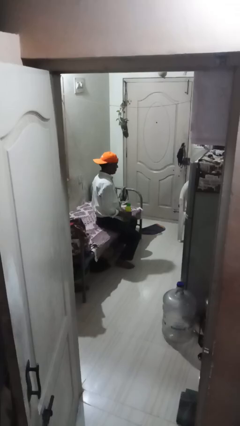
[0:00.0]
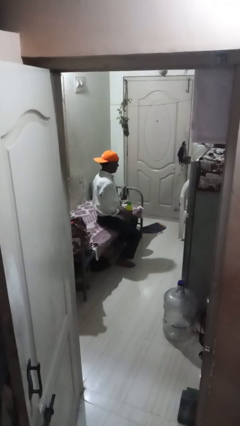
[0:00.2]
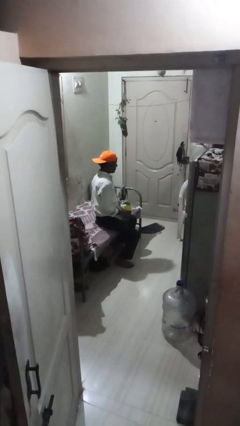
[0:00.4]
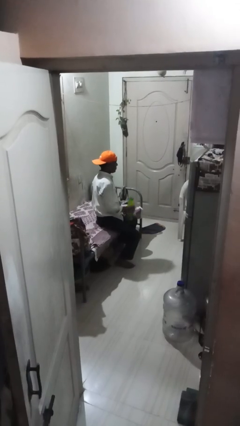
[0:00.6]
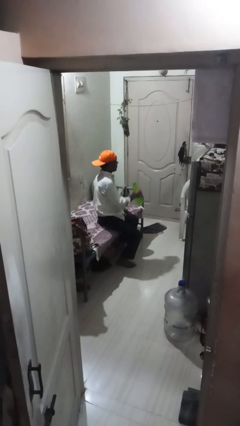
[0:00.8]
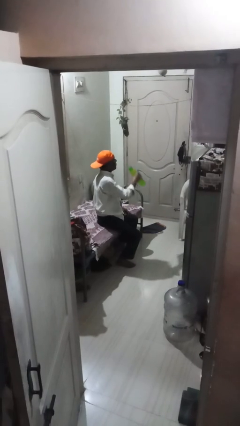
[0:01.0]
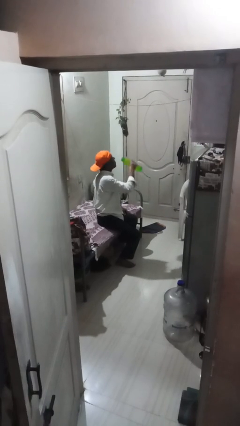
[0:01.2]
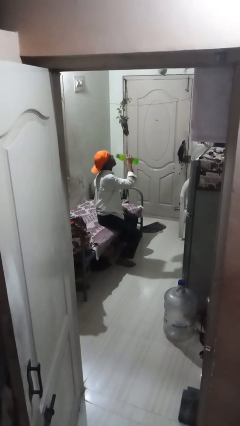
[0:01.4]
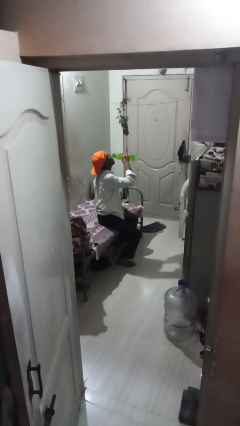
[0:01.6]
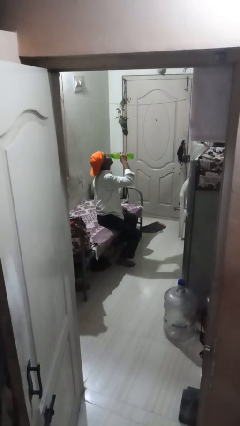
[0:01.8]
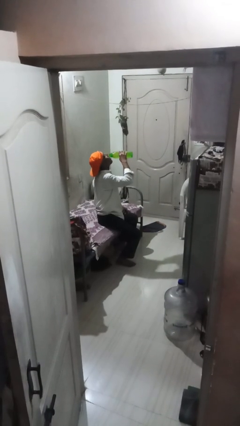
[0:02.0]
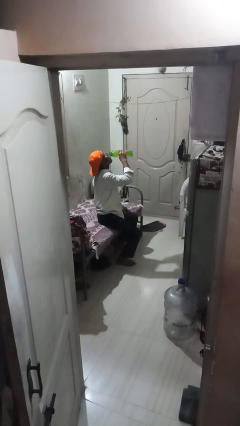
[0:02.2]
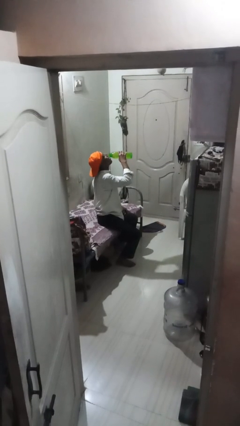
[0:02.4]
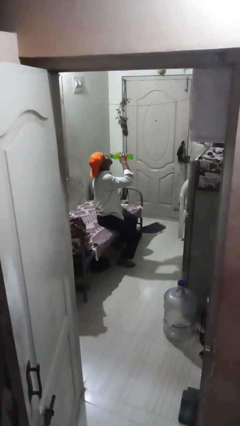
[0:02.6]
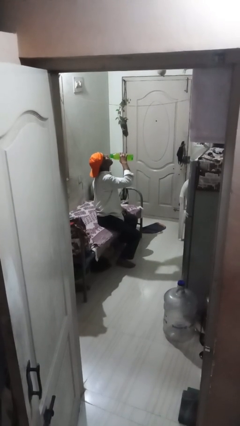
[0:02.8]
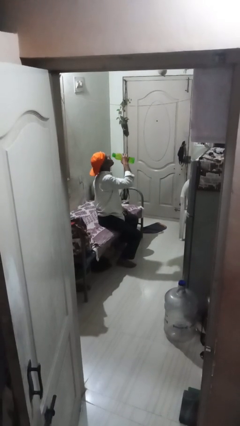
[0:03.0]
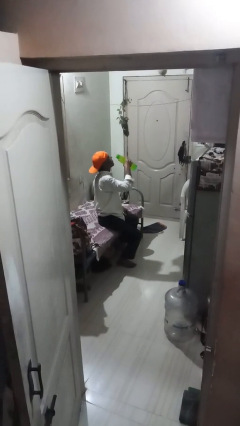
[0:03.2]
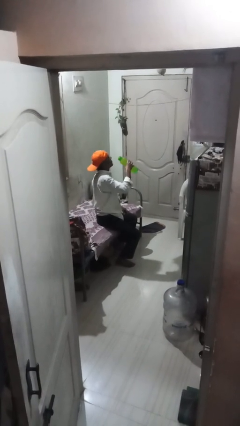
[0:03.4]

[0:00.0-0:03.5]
person drinks from bottle

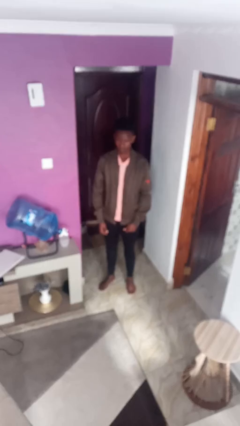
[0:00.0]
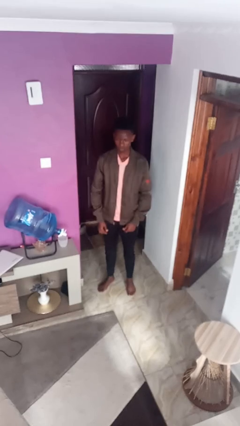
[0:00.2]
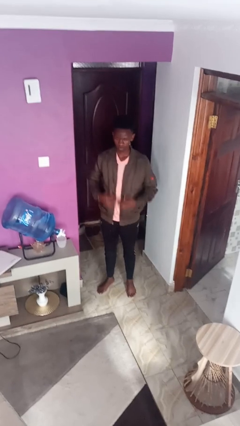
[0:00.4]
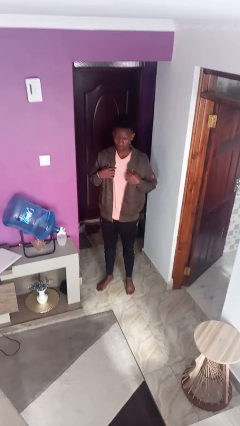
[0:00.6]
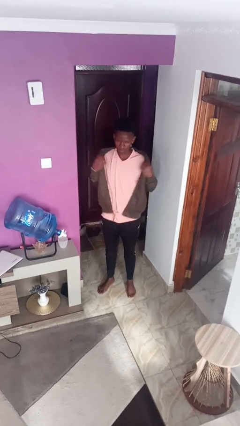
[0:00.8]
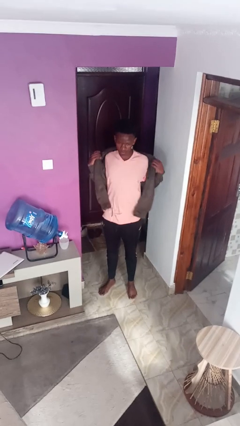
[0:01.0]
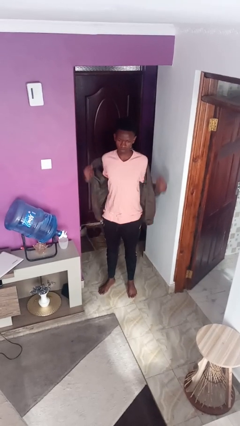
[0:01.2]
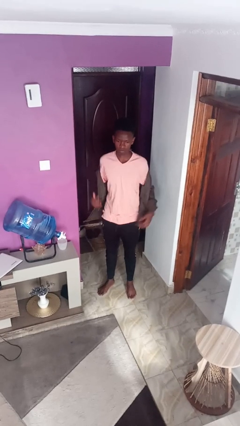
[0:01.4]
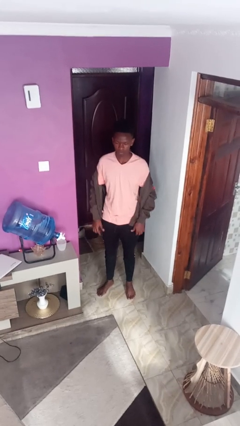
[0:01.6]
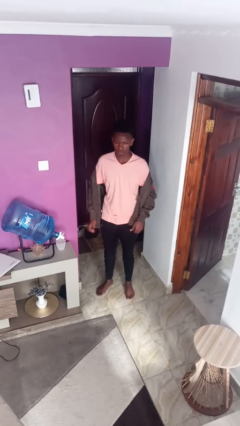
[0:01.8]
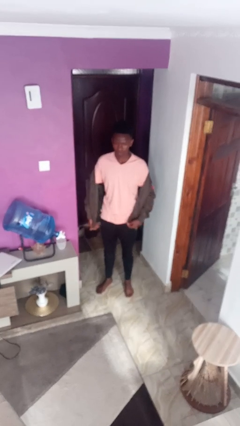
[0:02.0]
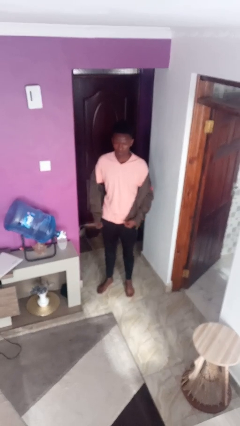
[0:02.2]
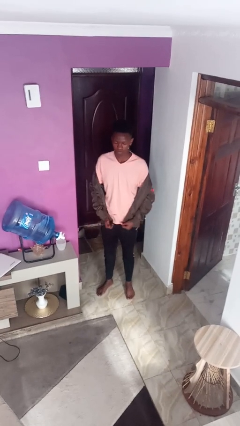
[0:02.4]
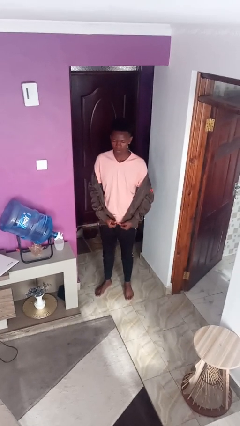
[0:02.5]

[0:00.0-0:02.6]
person takes off jacket

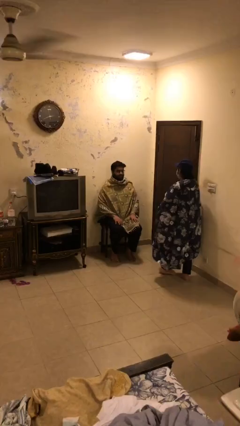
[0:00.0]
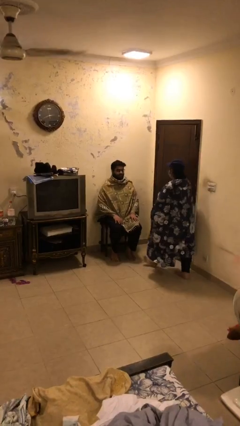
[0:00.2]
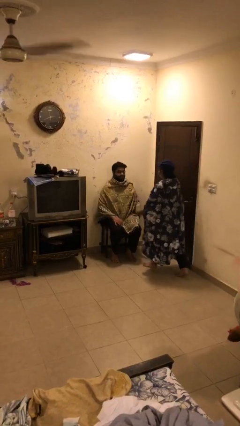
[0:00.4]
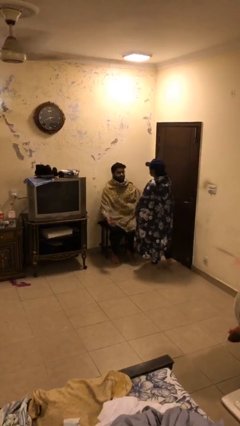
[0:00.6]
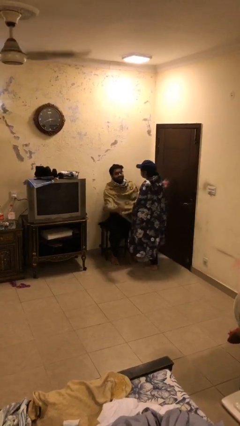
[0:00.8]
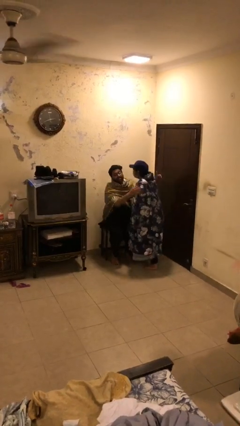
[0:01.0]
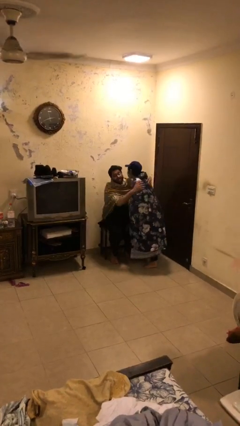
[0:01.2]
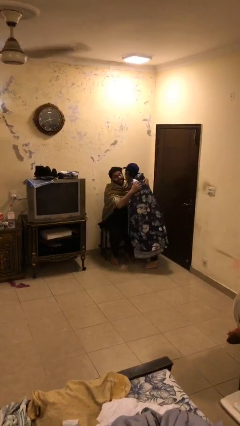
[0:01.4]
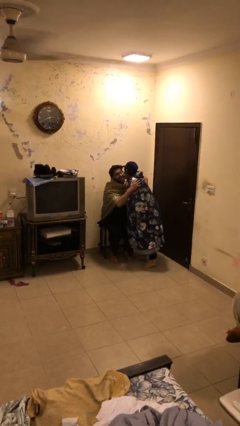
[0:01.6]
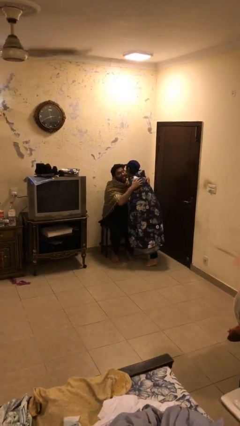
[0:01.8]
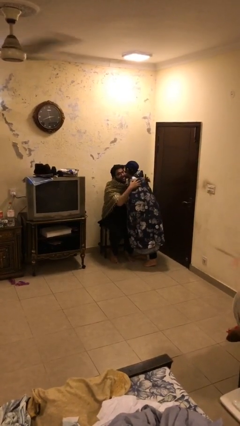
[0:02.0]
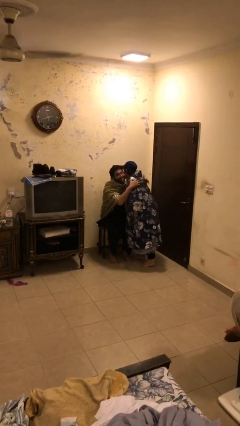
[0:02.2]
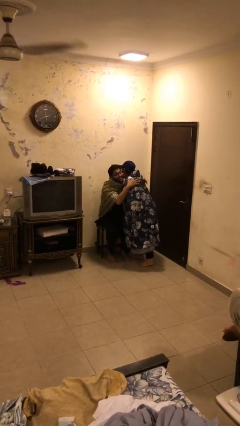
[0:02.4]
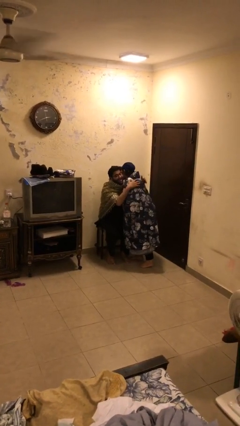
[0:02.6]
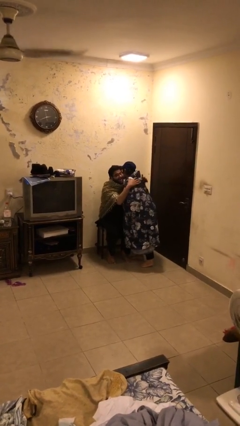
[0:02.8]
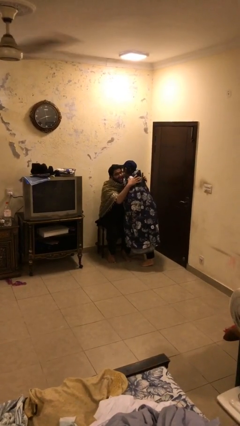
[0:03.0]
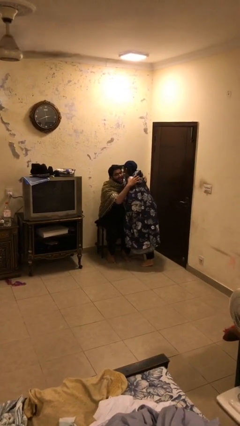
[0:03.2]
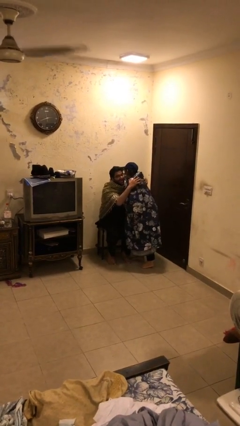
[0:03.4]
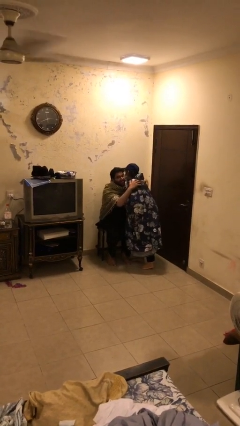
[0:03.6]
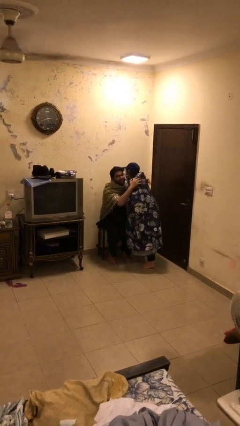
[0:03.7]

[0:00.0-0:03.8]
person embraces person

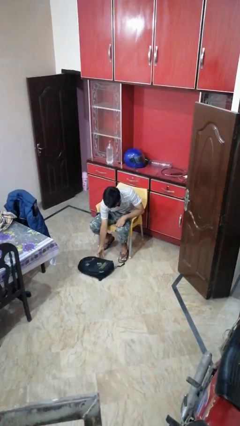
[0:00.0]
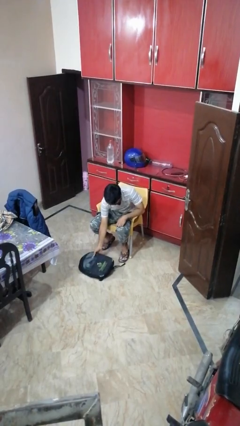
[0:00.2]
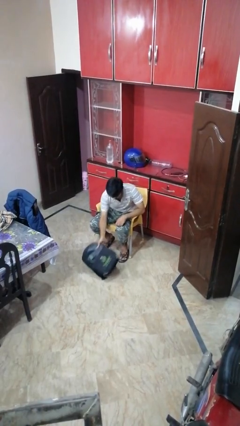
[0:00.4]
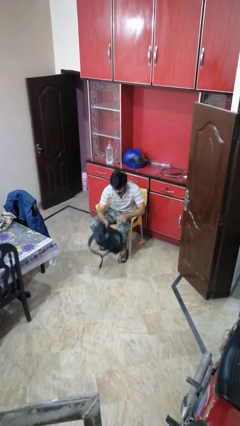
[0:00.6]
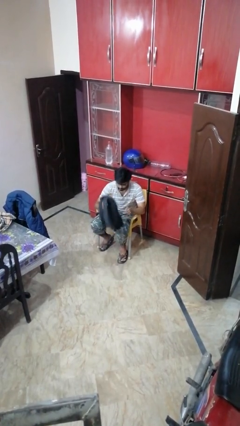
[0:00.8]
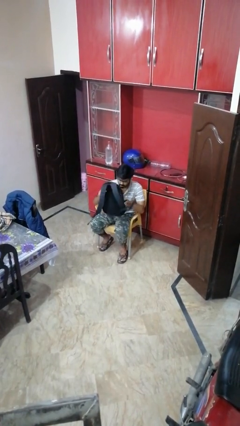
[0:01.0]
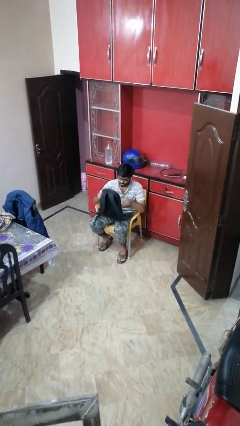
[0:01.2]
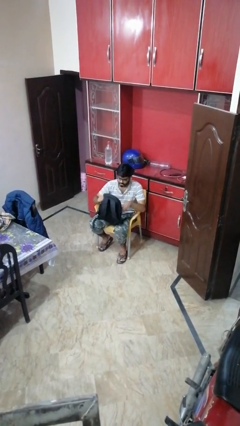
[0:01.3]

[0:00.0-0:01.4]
person picks up object from floor

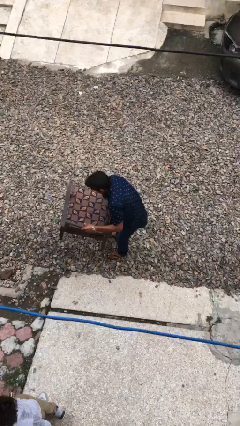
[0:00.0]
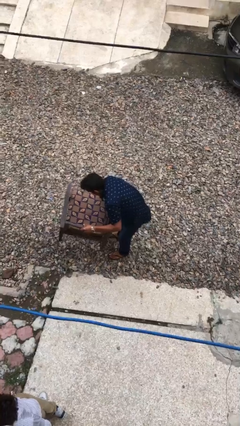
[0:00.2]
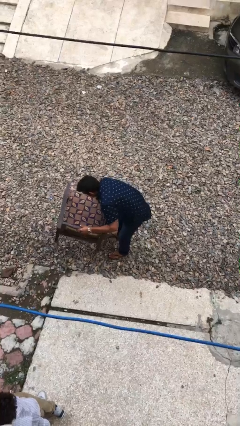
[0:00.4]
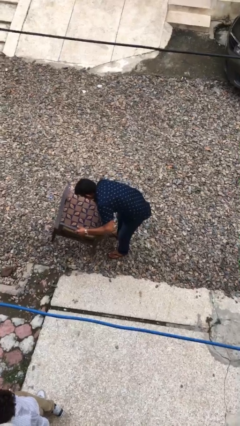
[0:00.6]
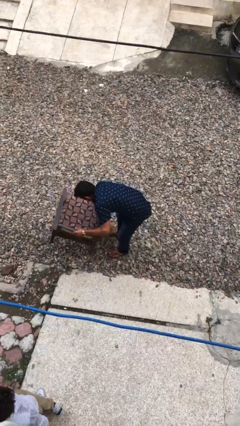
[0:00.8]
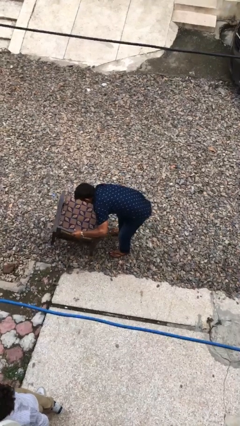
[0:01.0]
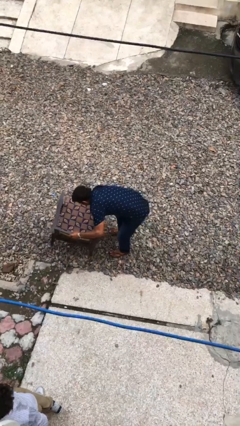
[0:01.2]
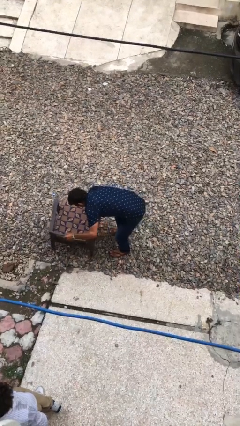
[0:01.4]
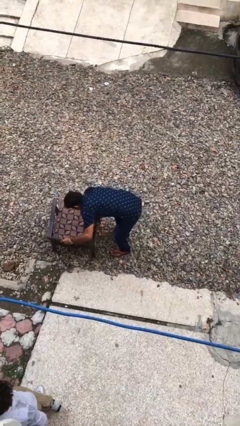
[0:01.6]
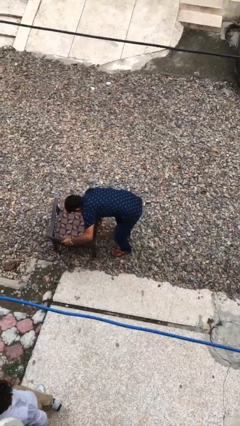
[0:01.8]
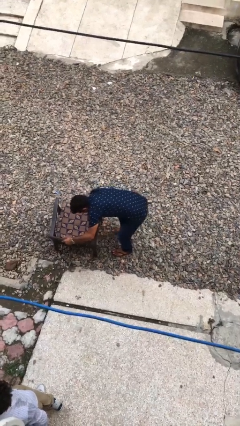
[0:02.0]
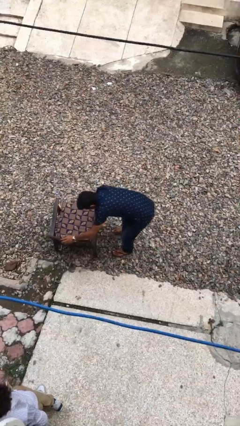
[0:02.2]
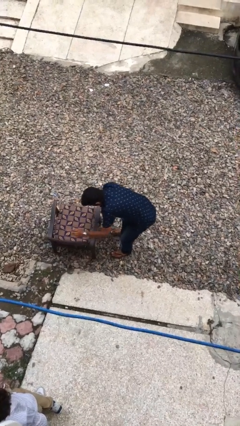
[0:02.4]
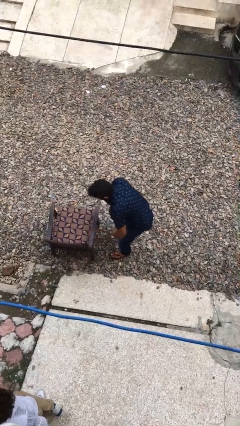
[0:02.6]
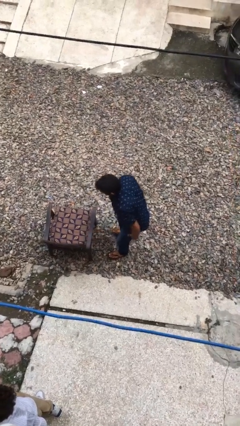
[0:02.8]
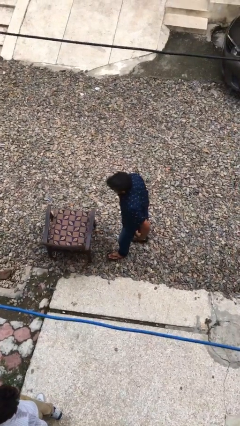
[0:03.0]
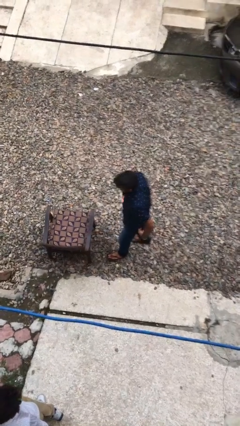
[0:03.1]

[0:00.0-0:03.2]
person puts down object on floor

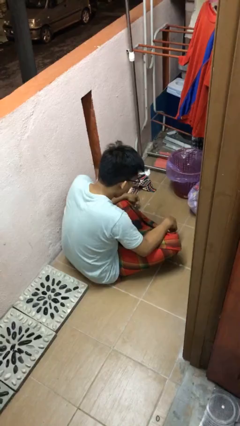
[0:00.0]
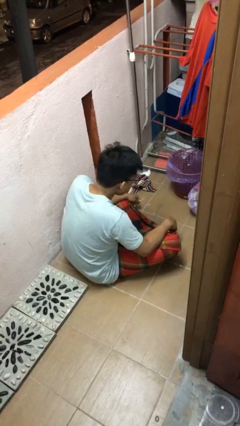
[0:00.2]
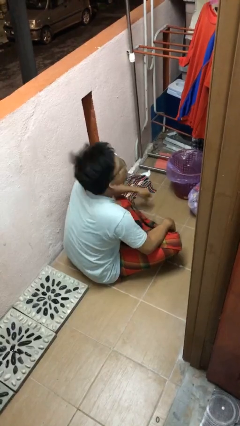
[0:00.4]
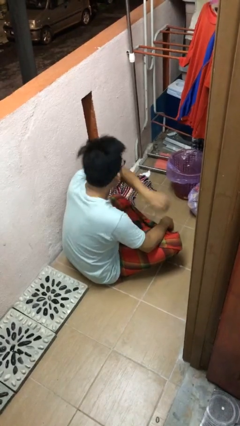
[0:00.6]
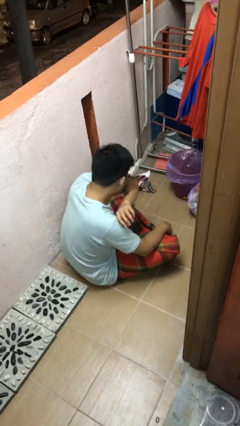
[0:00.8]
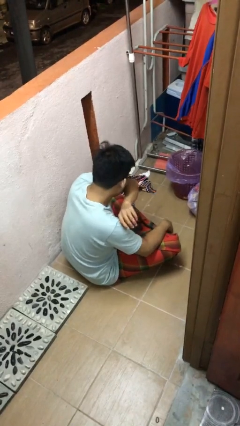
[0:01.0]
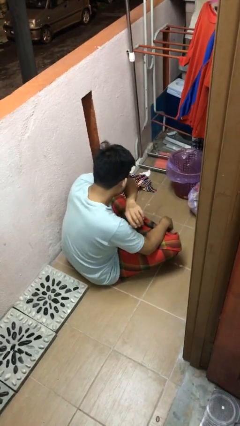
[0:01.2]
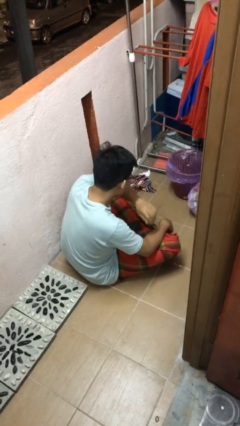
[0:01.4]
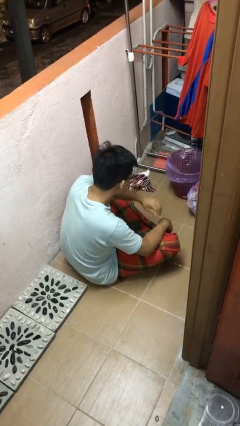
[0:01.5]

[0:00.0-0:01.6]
person sneezes into arm

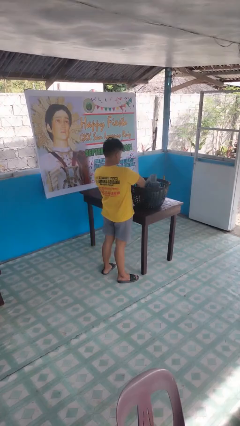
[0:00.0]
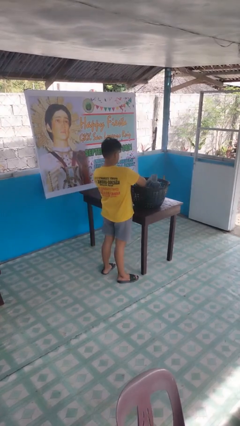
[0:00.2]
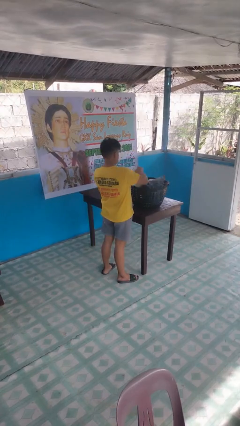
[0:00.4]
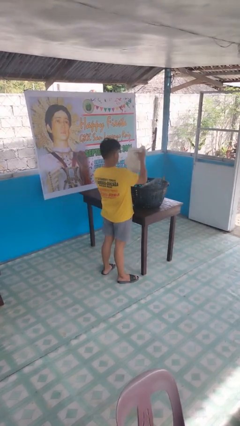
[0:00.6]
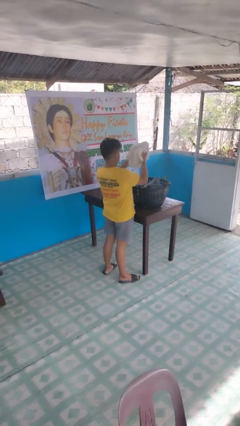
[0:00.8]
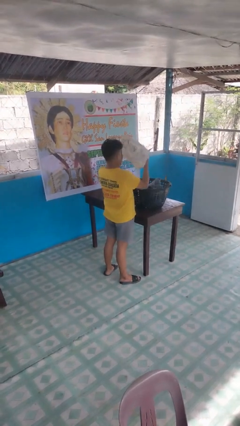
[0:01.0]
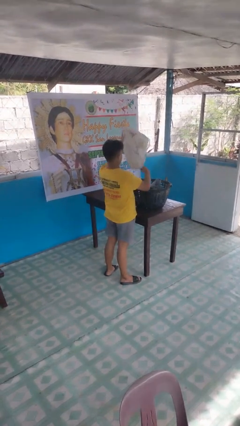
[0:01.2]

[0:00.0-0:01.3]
person takes object from basket
